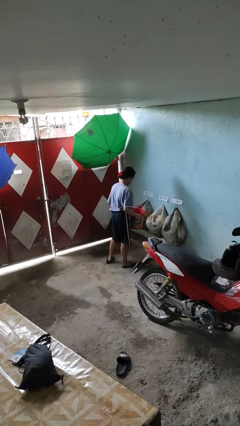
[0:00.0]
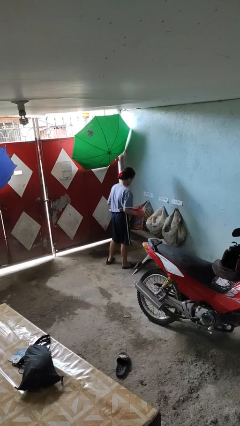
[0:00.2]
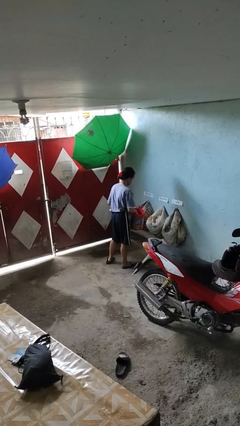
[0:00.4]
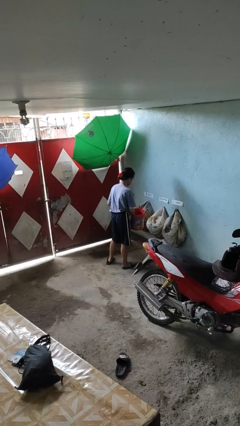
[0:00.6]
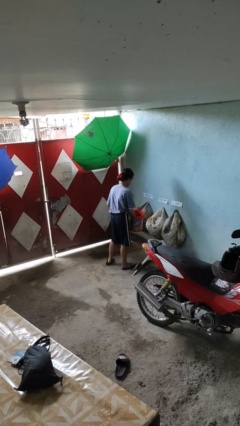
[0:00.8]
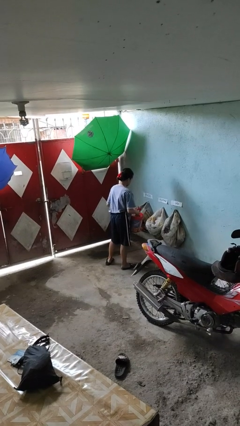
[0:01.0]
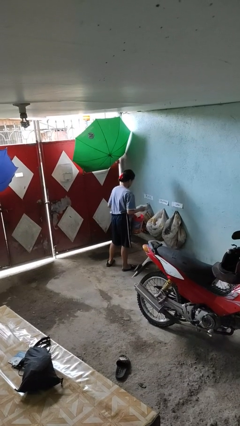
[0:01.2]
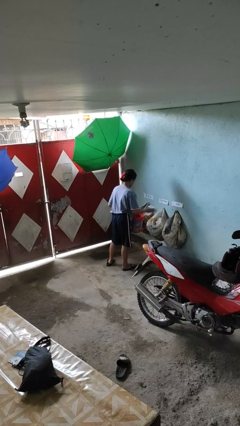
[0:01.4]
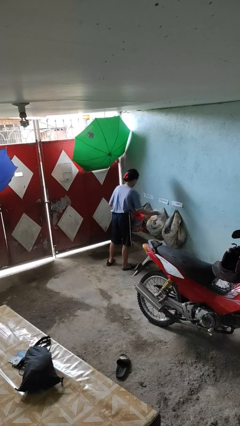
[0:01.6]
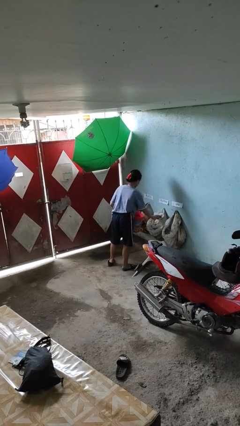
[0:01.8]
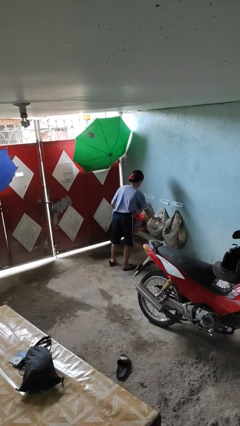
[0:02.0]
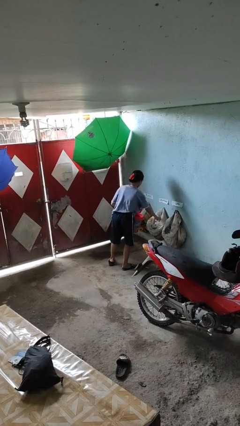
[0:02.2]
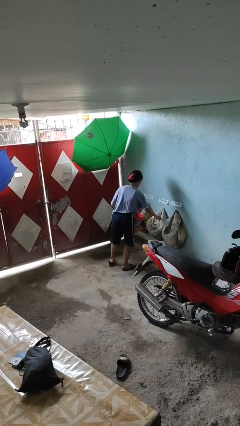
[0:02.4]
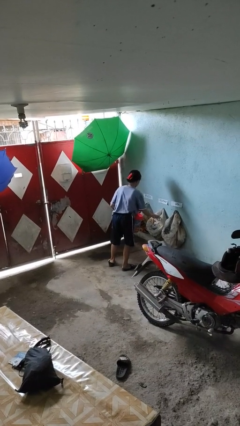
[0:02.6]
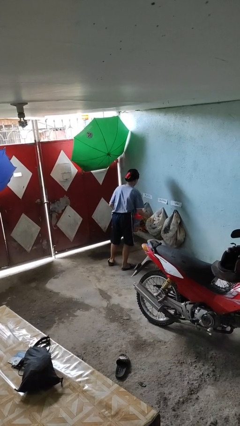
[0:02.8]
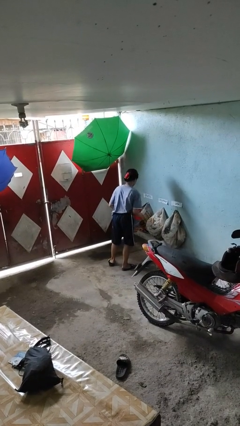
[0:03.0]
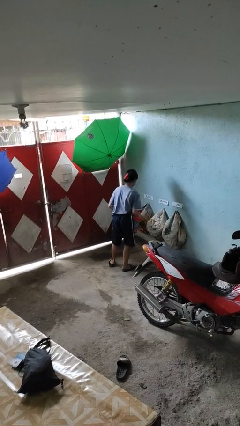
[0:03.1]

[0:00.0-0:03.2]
person discards trash

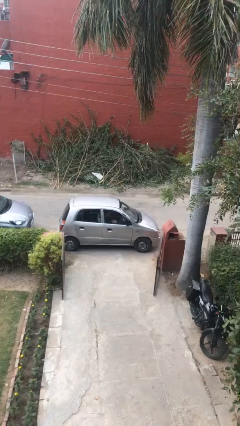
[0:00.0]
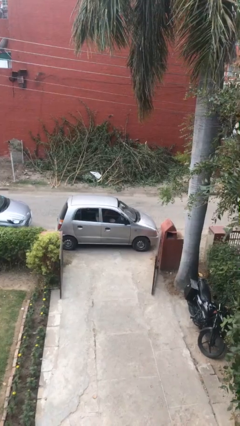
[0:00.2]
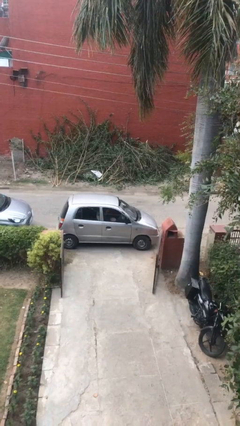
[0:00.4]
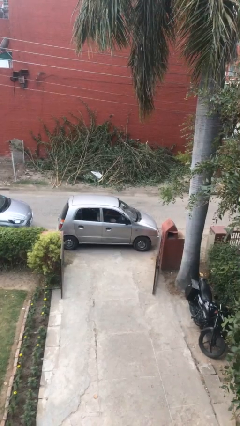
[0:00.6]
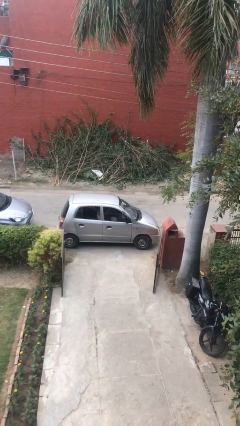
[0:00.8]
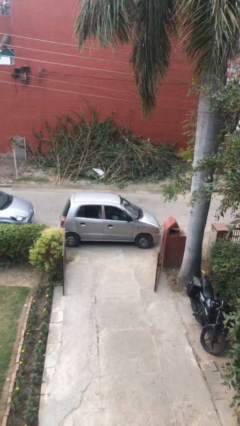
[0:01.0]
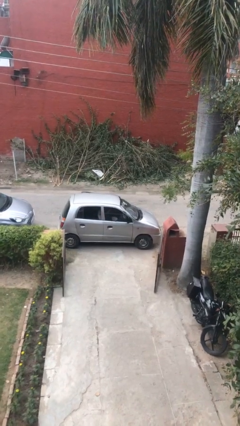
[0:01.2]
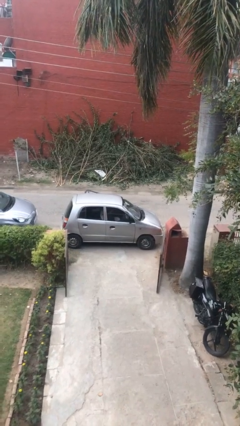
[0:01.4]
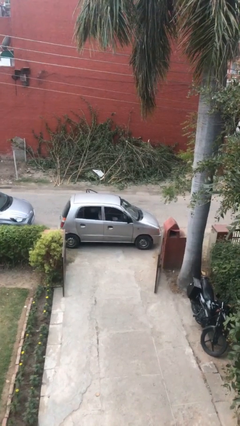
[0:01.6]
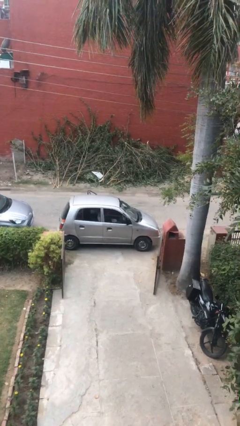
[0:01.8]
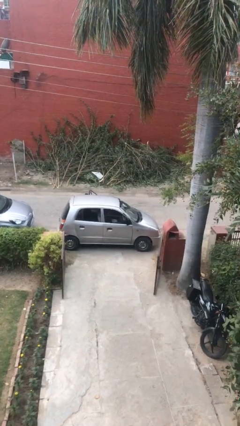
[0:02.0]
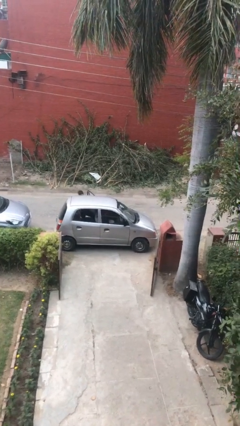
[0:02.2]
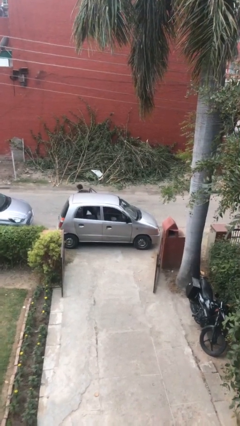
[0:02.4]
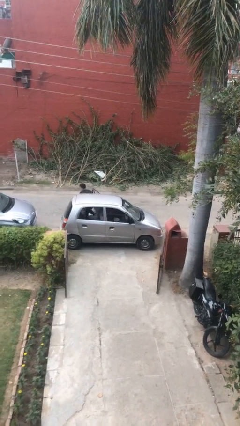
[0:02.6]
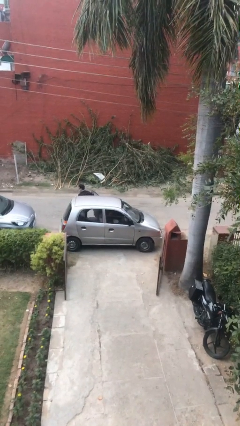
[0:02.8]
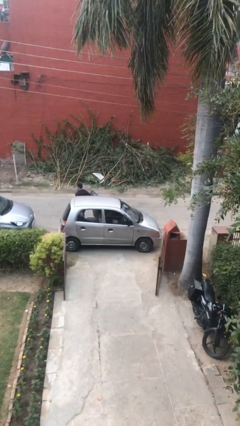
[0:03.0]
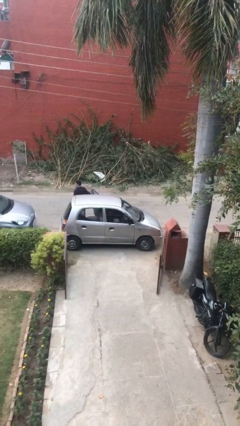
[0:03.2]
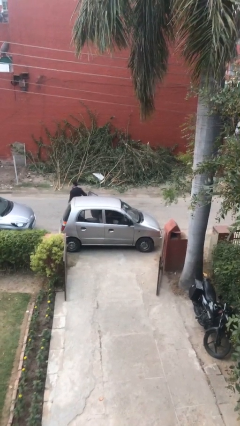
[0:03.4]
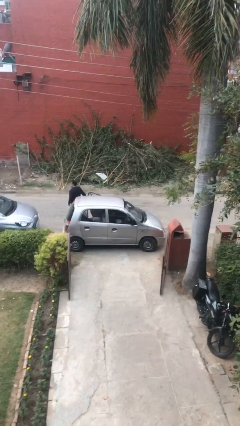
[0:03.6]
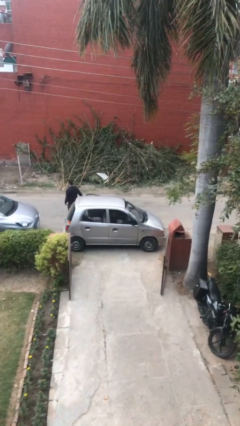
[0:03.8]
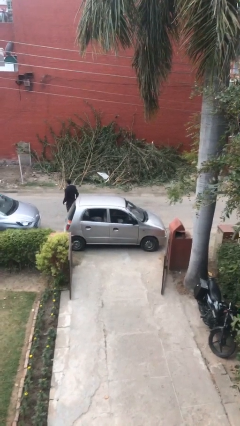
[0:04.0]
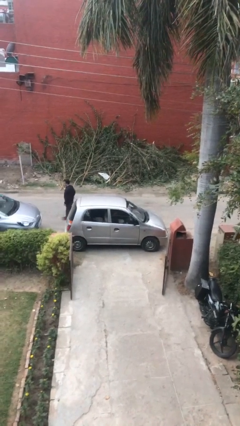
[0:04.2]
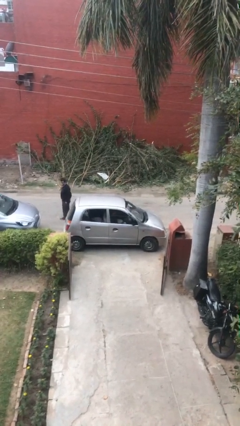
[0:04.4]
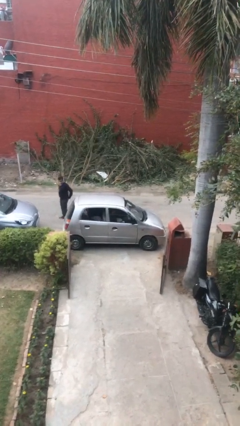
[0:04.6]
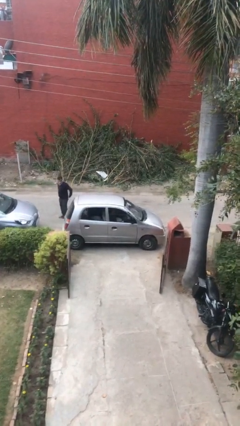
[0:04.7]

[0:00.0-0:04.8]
car drops off person

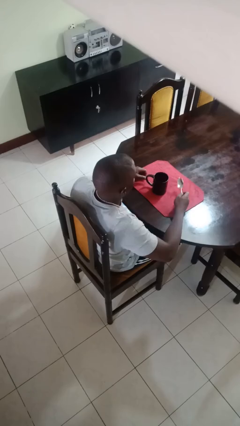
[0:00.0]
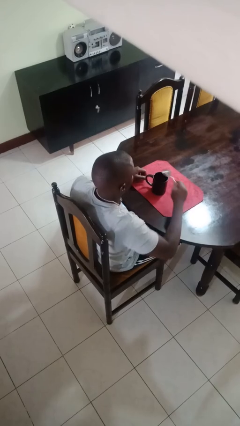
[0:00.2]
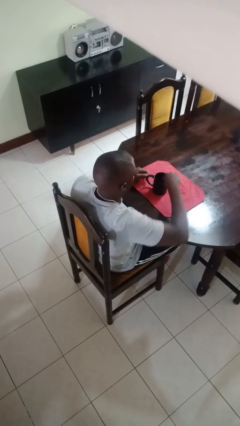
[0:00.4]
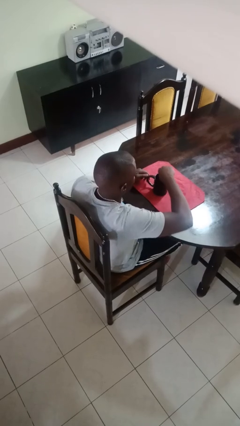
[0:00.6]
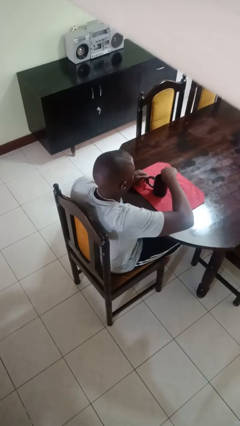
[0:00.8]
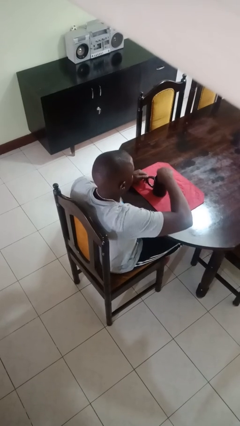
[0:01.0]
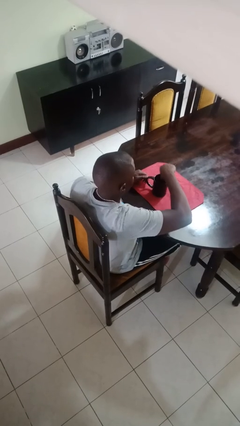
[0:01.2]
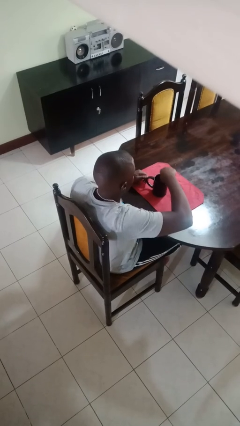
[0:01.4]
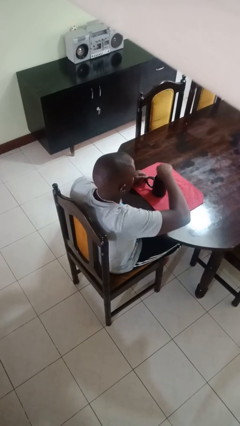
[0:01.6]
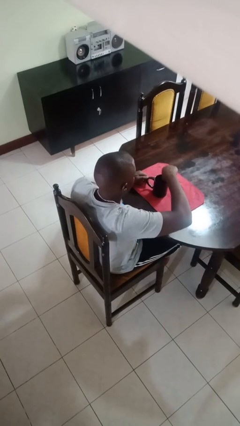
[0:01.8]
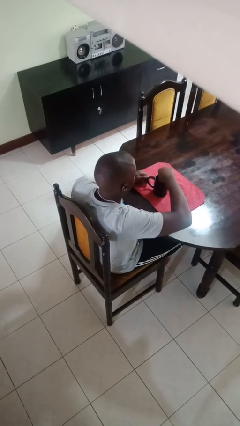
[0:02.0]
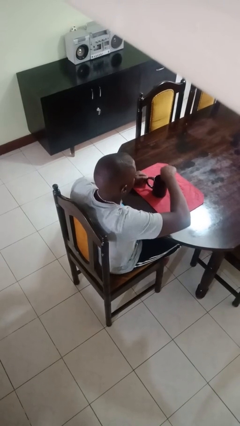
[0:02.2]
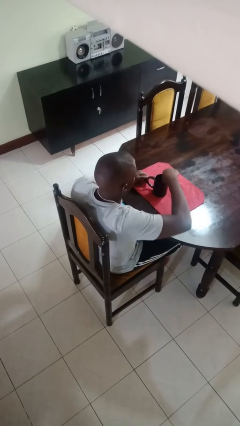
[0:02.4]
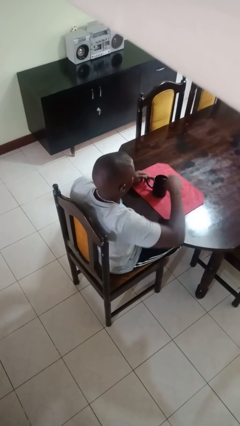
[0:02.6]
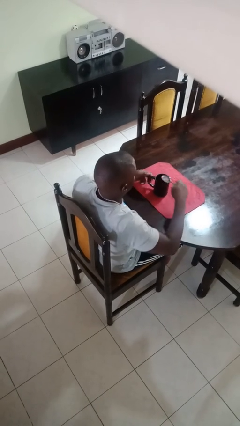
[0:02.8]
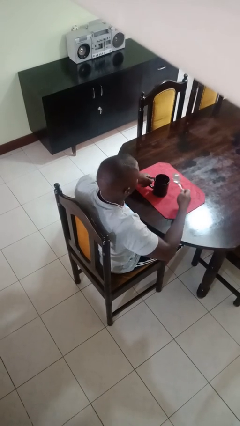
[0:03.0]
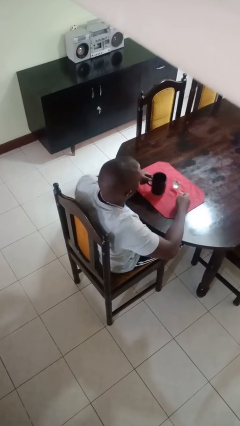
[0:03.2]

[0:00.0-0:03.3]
person stirs mug

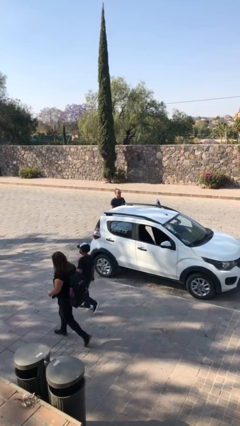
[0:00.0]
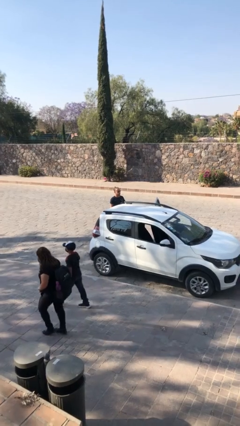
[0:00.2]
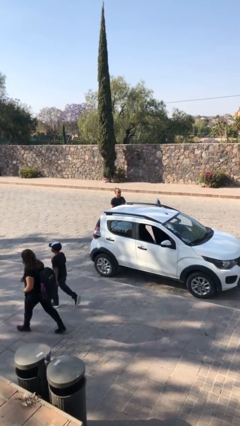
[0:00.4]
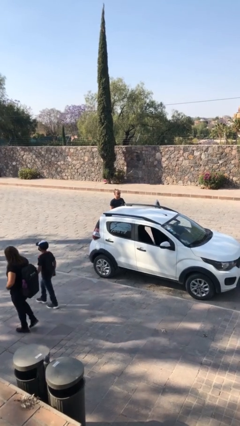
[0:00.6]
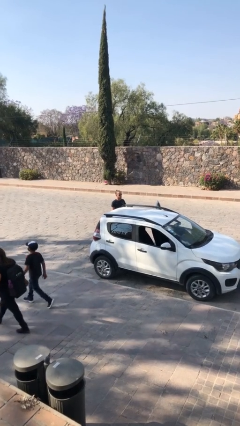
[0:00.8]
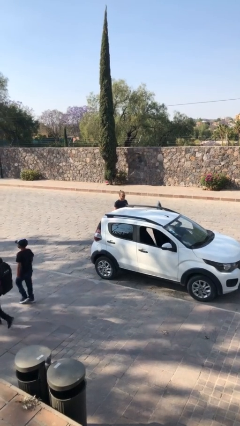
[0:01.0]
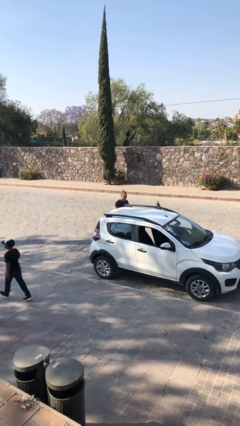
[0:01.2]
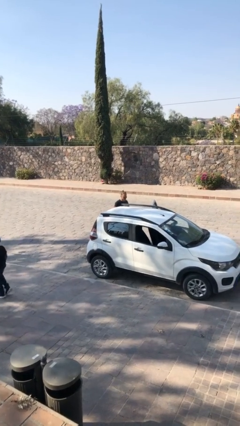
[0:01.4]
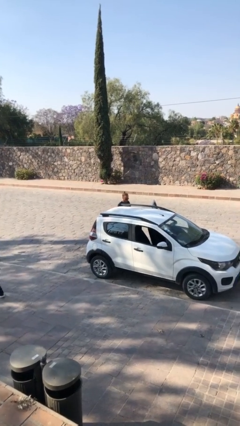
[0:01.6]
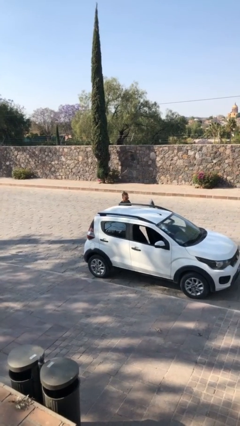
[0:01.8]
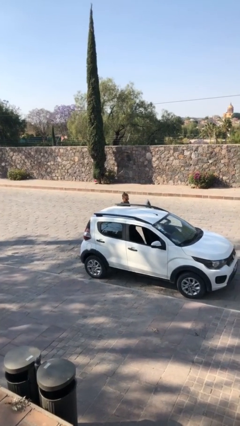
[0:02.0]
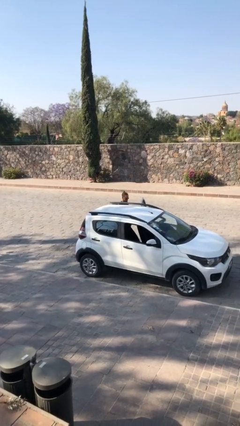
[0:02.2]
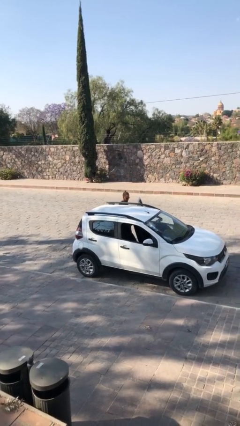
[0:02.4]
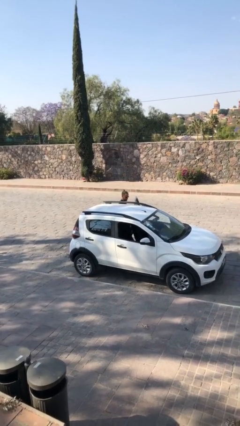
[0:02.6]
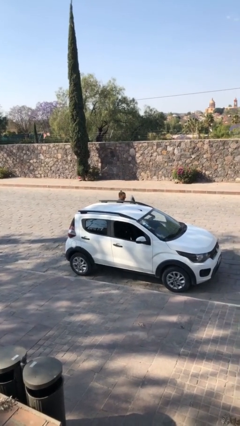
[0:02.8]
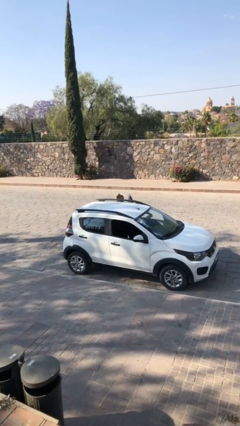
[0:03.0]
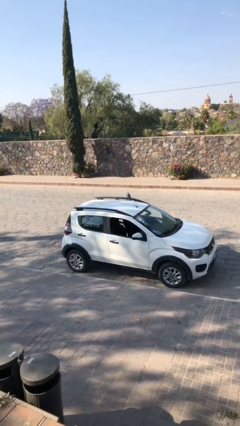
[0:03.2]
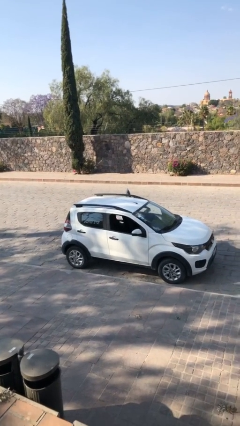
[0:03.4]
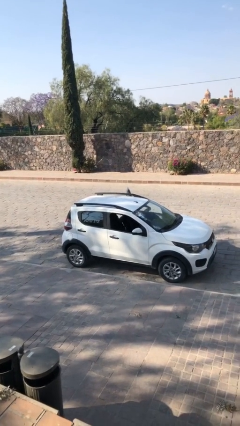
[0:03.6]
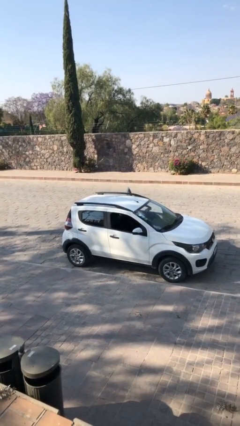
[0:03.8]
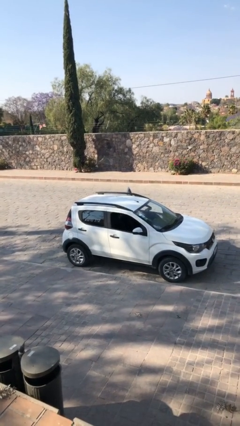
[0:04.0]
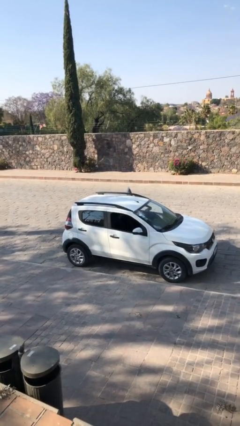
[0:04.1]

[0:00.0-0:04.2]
person enters car

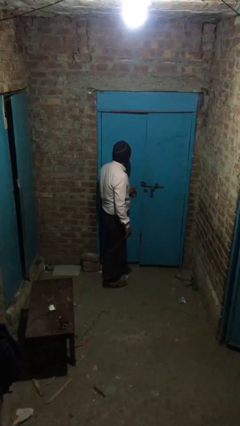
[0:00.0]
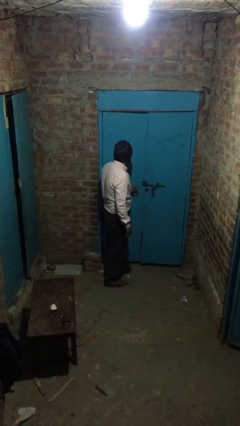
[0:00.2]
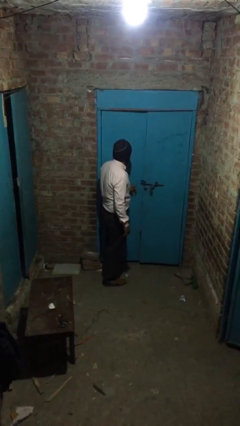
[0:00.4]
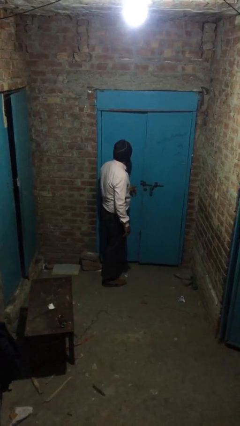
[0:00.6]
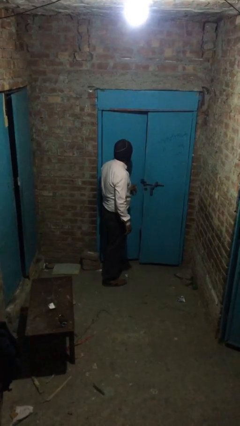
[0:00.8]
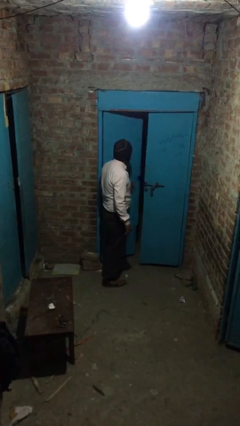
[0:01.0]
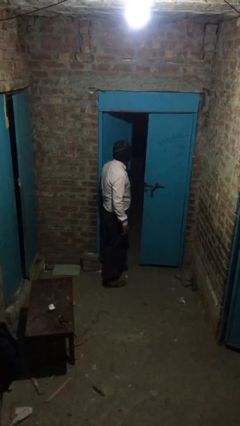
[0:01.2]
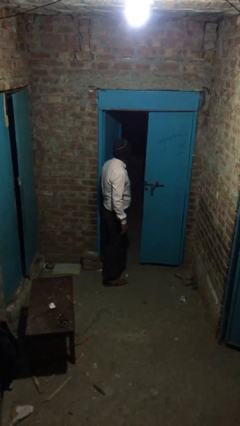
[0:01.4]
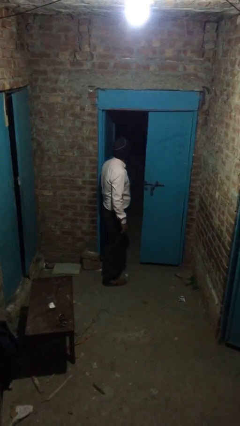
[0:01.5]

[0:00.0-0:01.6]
person opens facility door

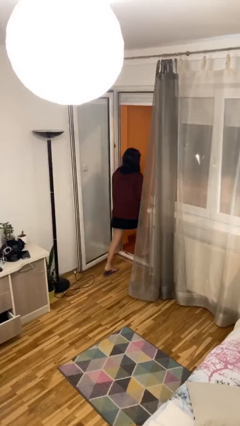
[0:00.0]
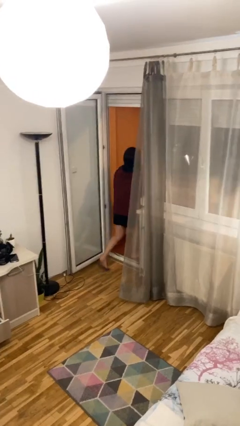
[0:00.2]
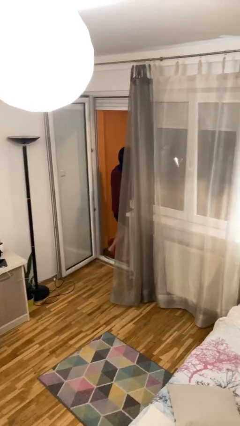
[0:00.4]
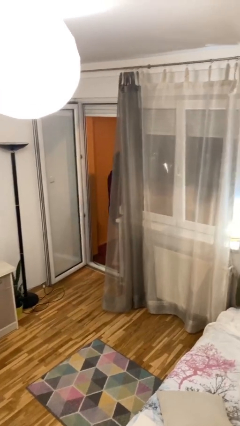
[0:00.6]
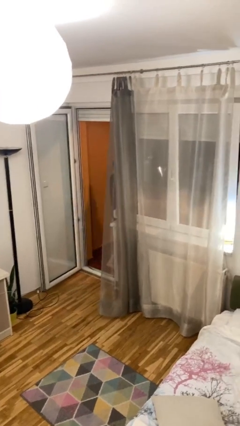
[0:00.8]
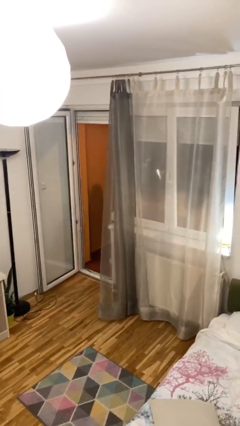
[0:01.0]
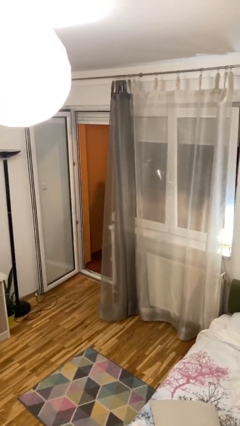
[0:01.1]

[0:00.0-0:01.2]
person exits scene through structure
